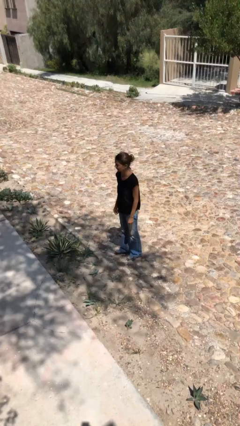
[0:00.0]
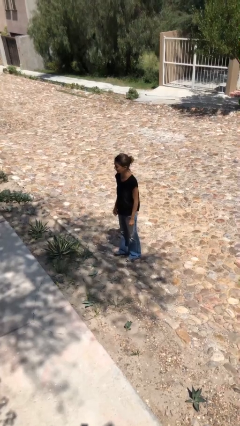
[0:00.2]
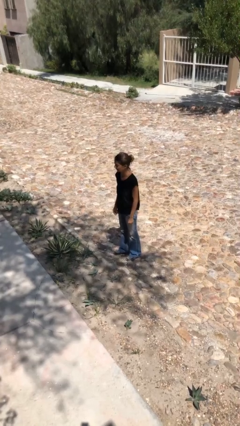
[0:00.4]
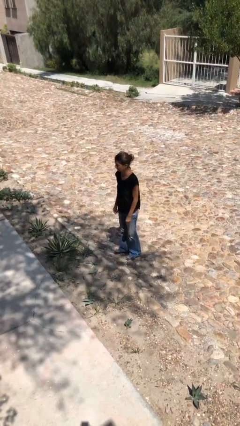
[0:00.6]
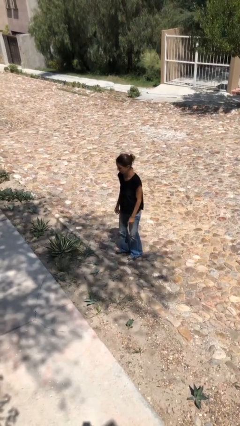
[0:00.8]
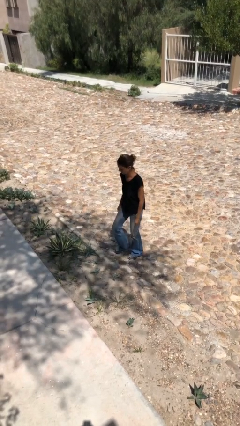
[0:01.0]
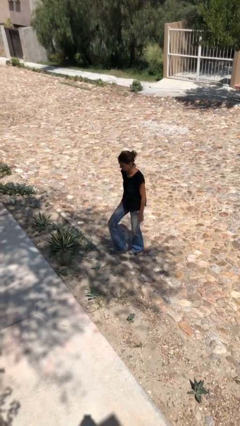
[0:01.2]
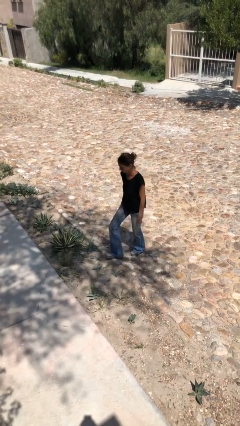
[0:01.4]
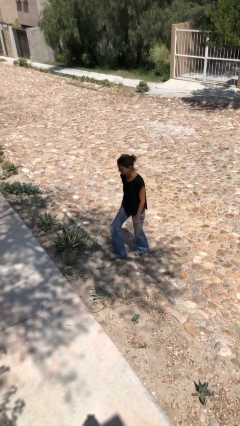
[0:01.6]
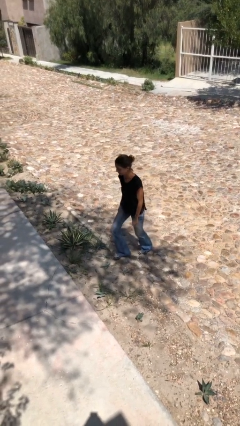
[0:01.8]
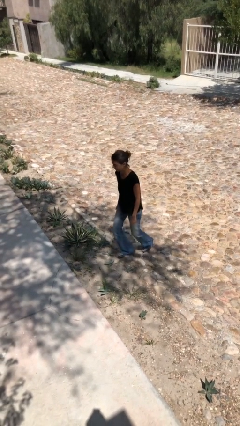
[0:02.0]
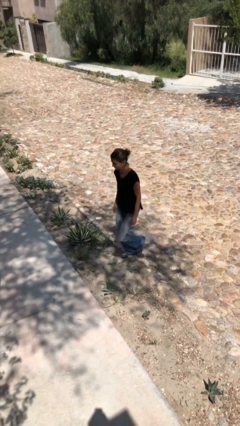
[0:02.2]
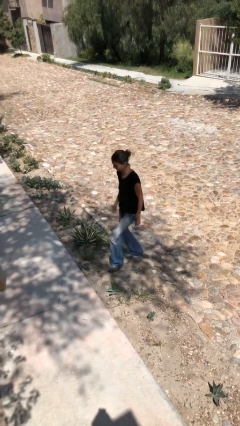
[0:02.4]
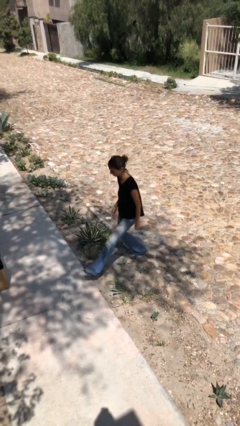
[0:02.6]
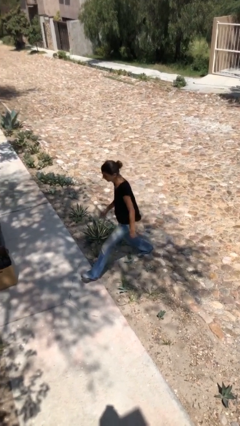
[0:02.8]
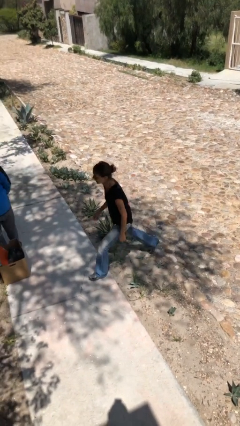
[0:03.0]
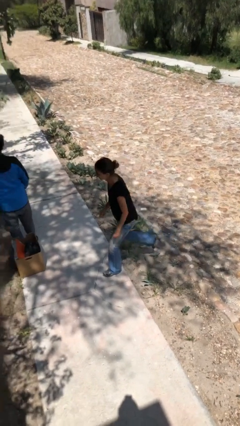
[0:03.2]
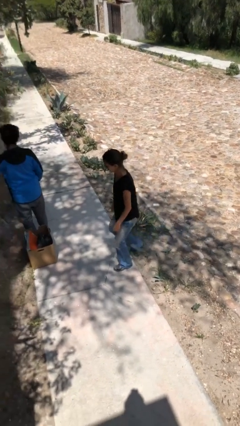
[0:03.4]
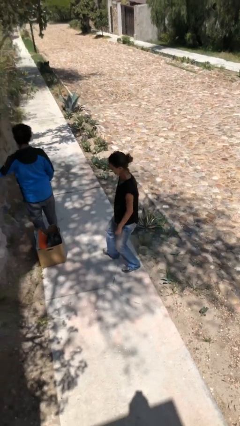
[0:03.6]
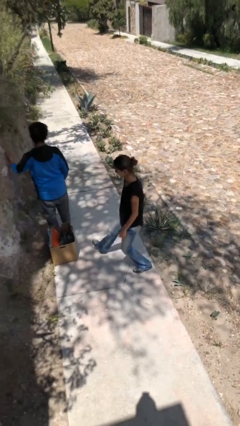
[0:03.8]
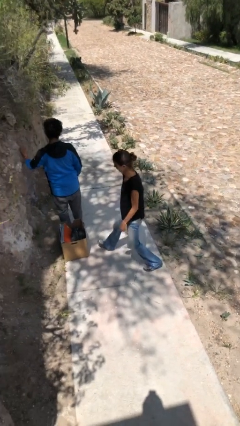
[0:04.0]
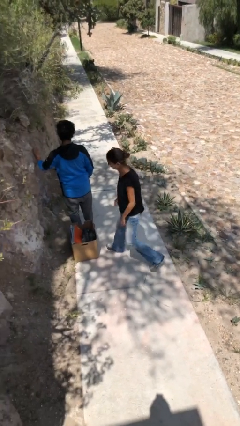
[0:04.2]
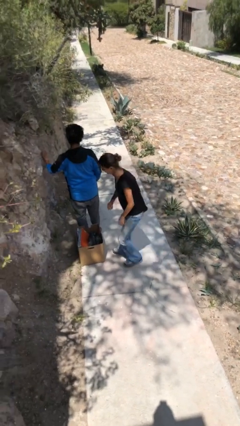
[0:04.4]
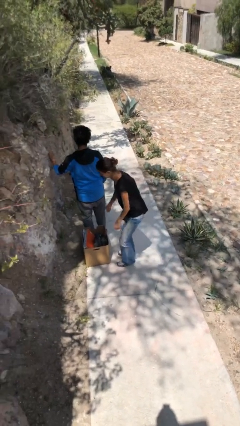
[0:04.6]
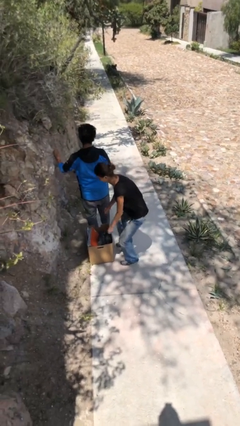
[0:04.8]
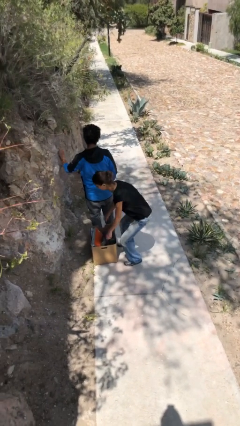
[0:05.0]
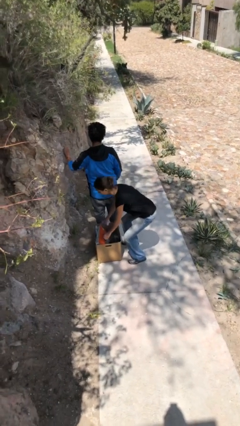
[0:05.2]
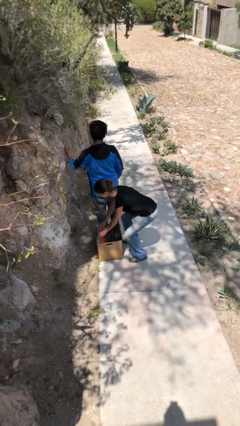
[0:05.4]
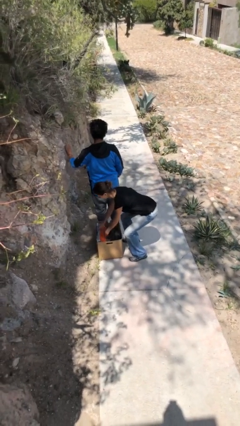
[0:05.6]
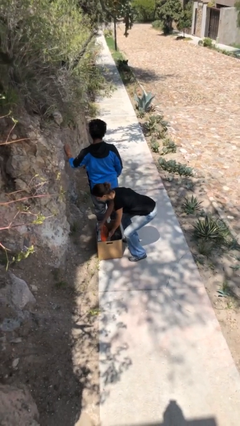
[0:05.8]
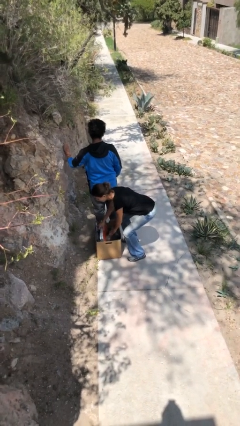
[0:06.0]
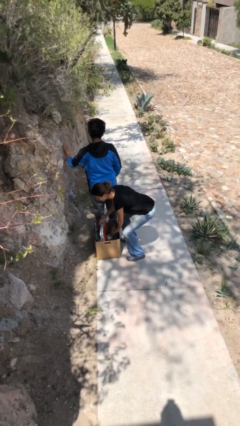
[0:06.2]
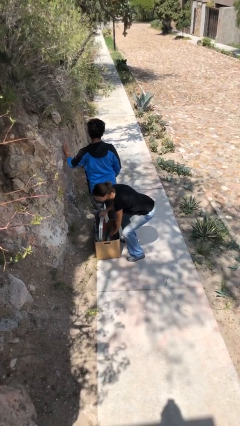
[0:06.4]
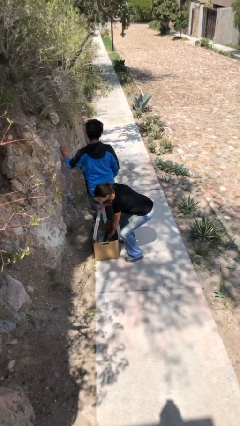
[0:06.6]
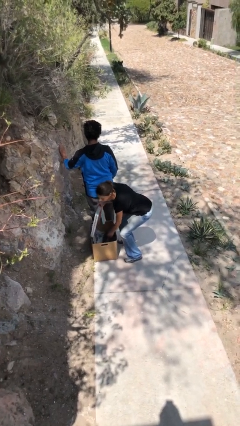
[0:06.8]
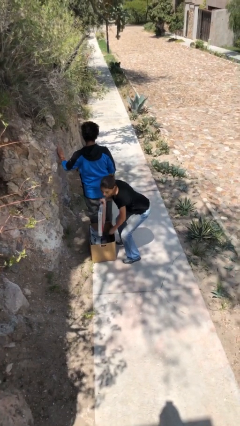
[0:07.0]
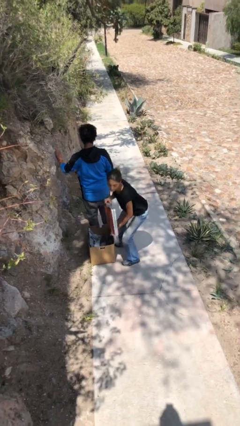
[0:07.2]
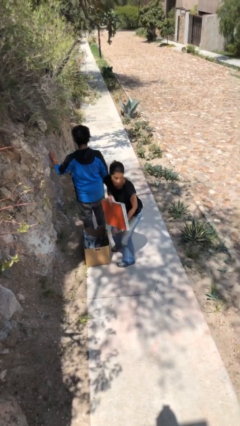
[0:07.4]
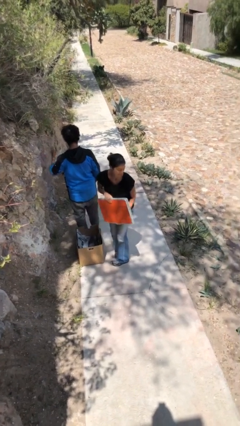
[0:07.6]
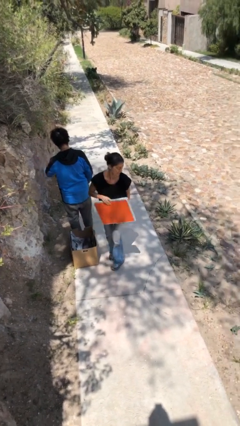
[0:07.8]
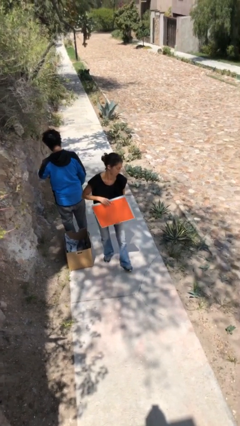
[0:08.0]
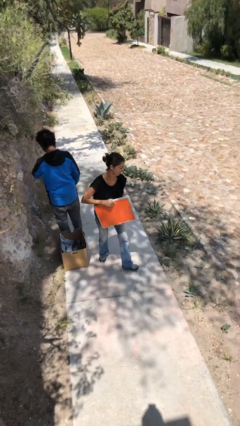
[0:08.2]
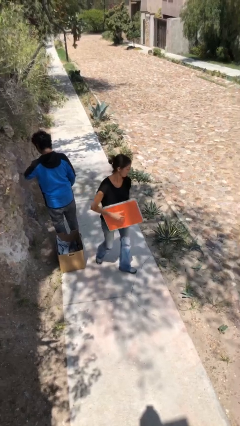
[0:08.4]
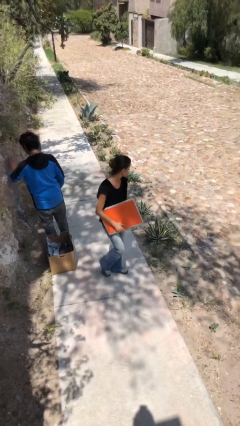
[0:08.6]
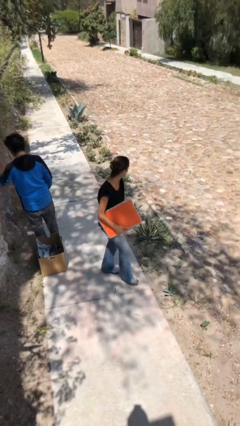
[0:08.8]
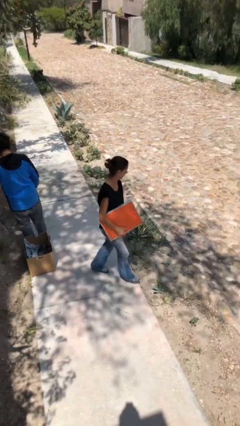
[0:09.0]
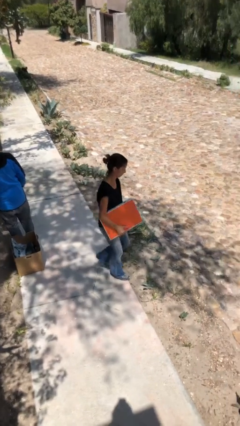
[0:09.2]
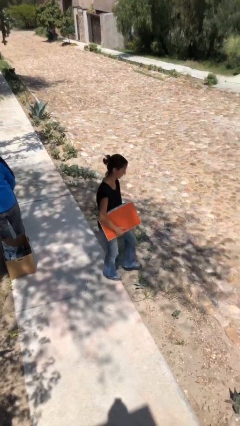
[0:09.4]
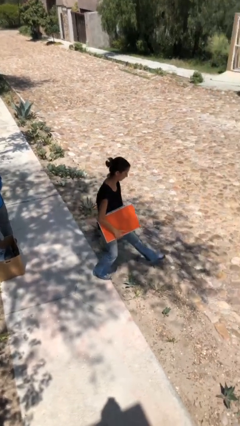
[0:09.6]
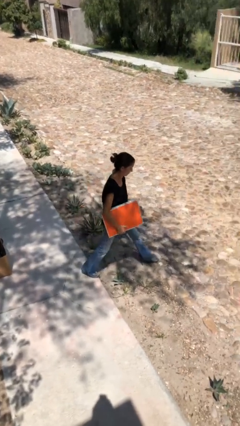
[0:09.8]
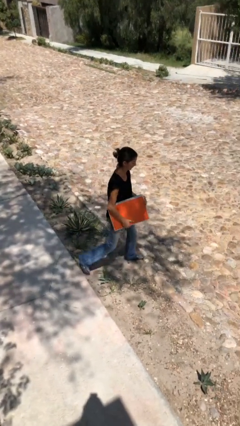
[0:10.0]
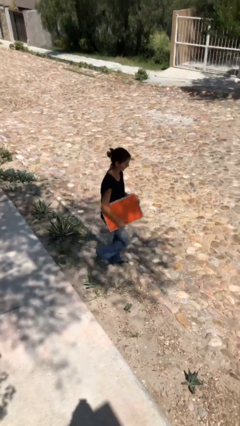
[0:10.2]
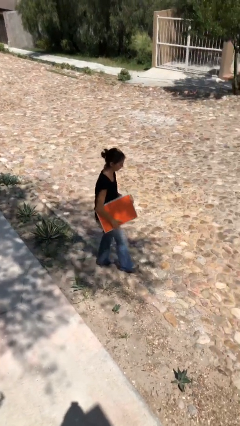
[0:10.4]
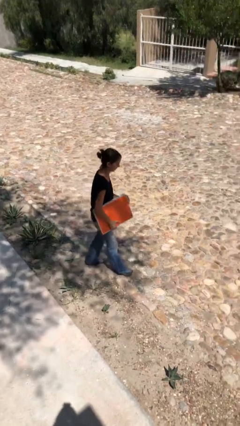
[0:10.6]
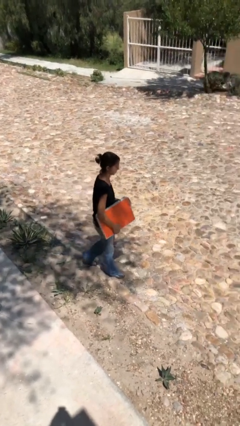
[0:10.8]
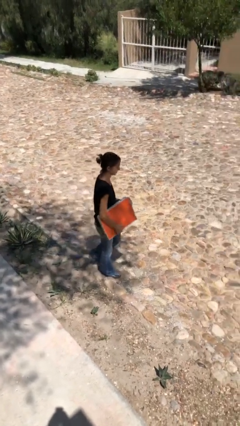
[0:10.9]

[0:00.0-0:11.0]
person steals object from person

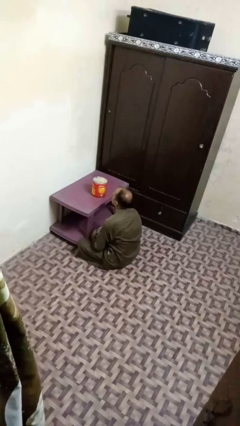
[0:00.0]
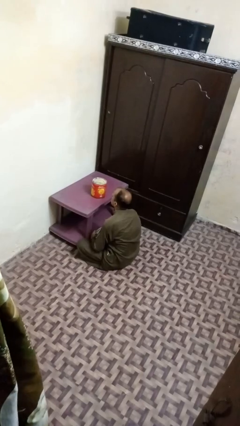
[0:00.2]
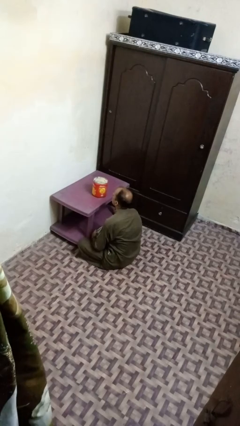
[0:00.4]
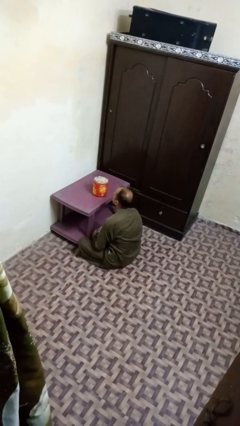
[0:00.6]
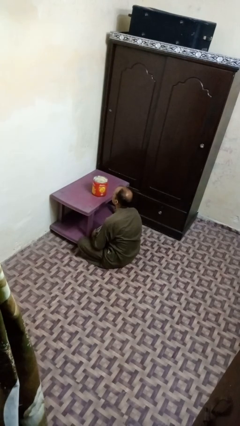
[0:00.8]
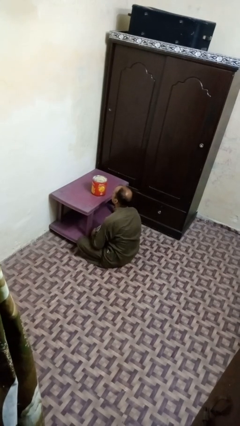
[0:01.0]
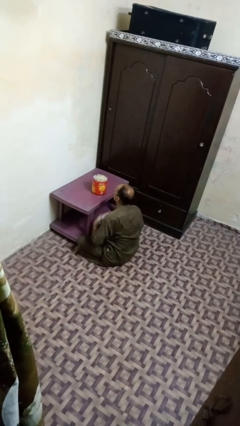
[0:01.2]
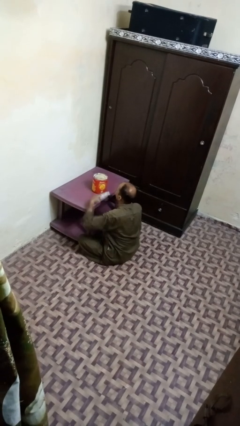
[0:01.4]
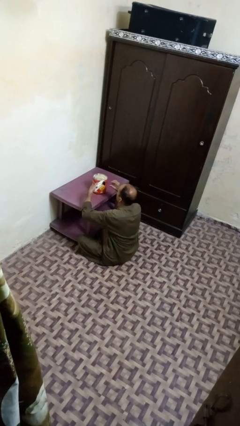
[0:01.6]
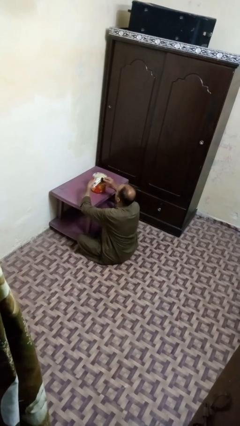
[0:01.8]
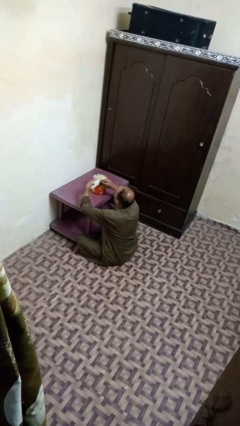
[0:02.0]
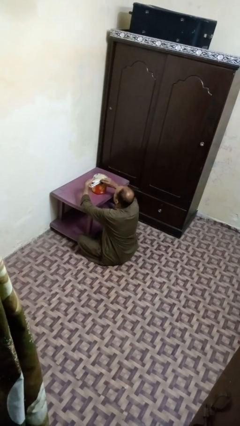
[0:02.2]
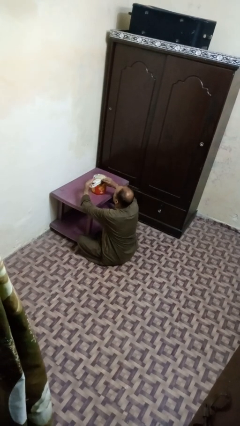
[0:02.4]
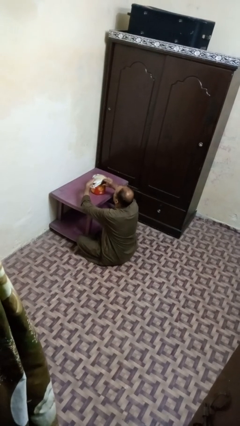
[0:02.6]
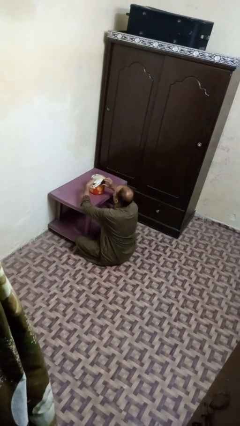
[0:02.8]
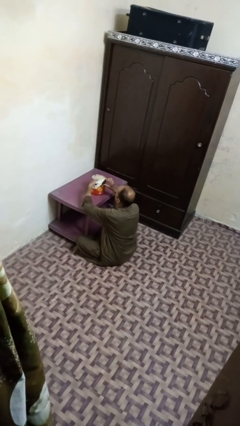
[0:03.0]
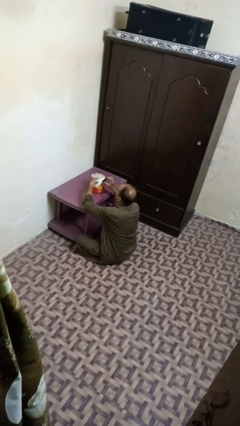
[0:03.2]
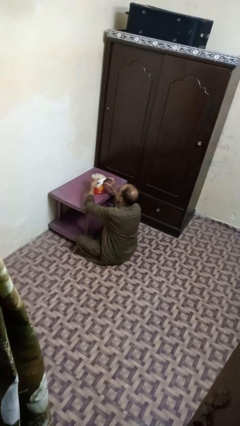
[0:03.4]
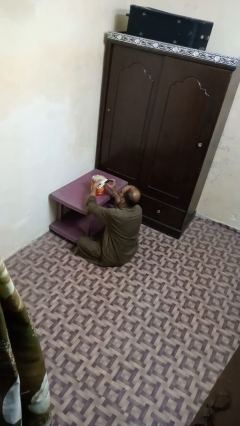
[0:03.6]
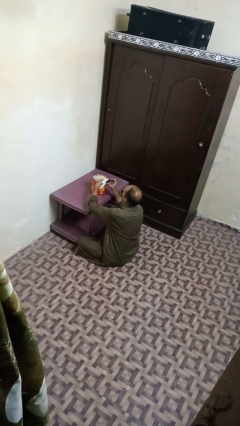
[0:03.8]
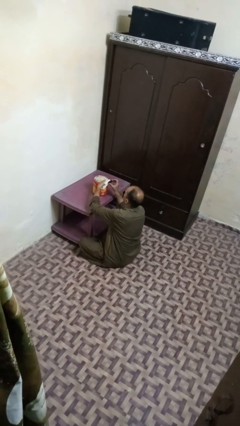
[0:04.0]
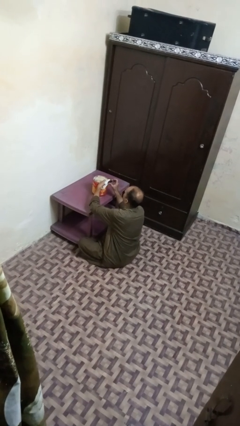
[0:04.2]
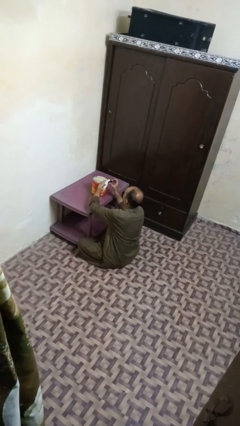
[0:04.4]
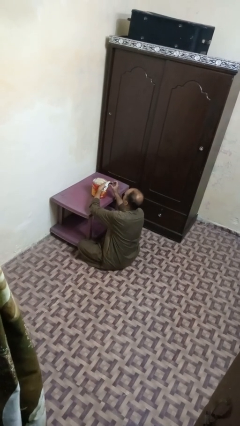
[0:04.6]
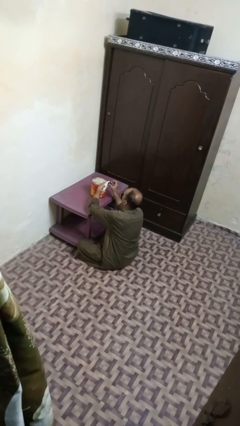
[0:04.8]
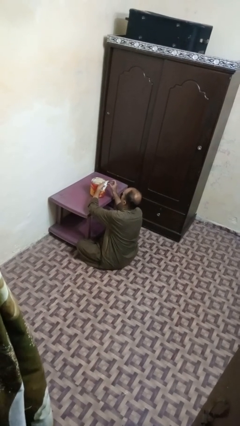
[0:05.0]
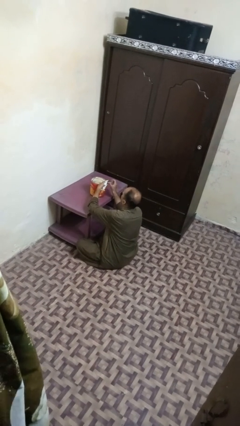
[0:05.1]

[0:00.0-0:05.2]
person opens can with can opener

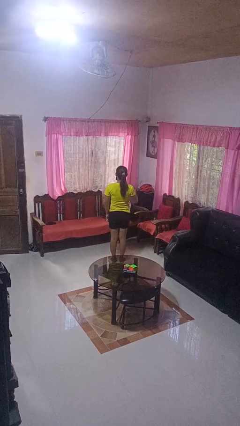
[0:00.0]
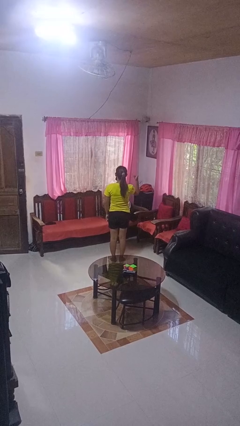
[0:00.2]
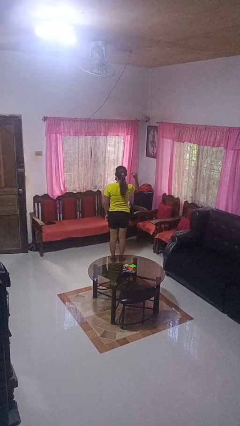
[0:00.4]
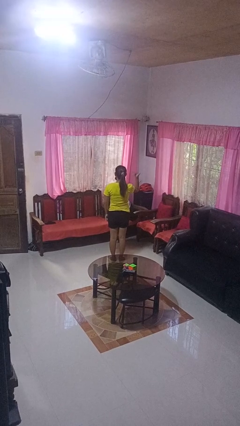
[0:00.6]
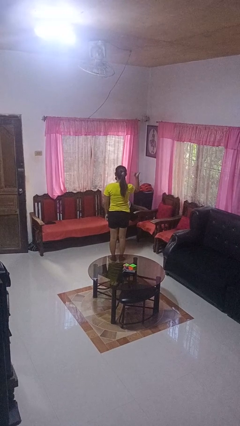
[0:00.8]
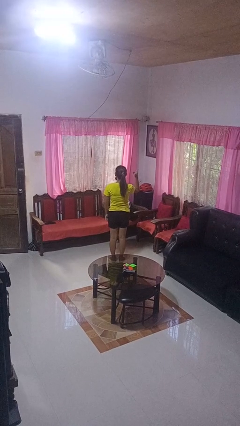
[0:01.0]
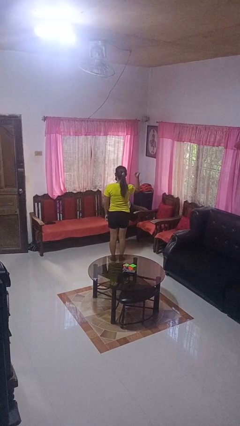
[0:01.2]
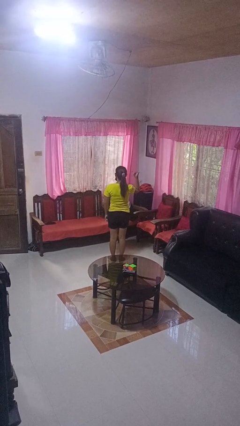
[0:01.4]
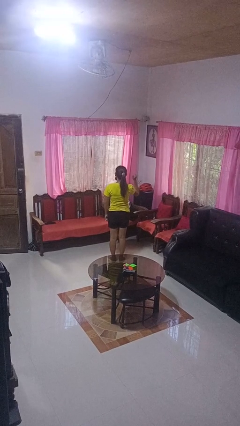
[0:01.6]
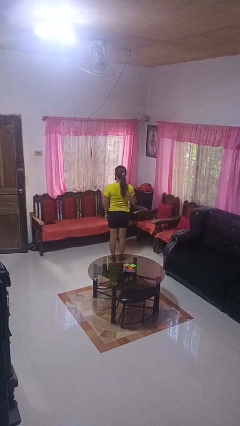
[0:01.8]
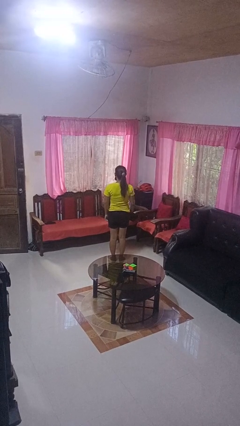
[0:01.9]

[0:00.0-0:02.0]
person gestures hang loose
